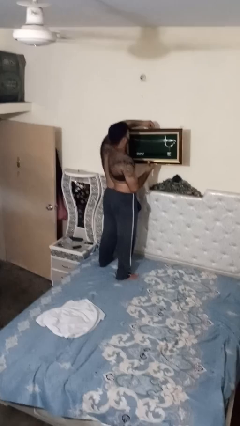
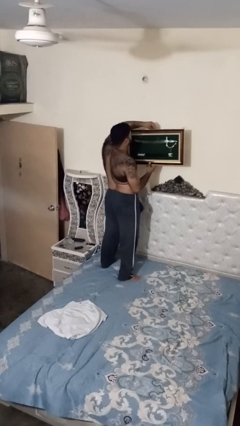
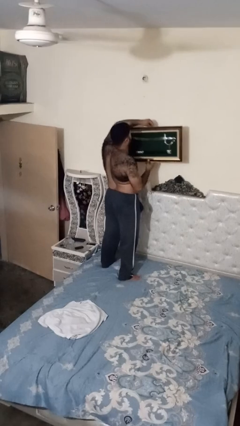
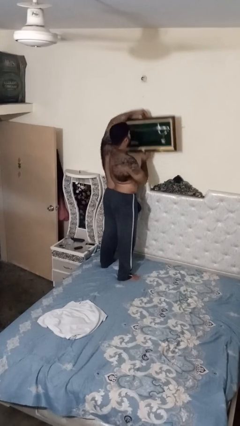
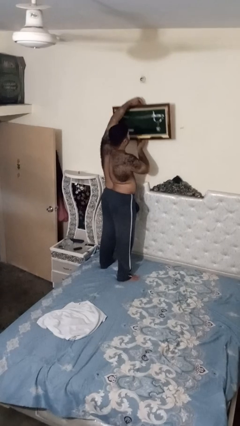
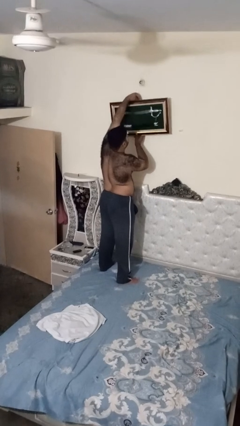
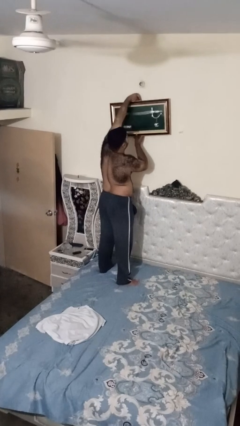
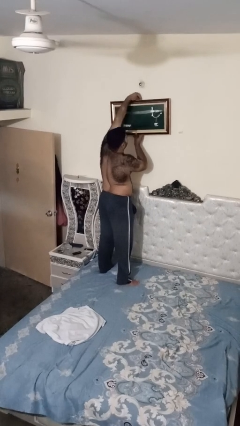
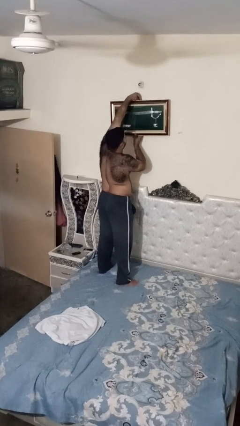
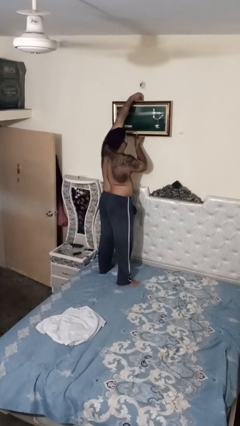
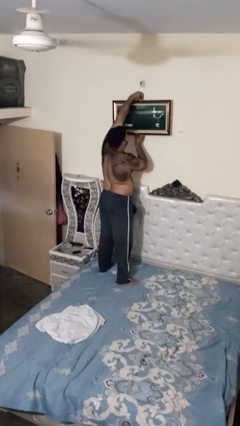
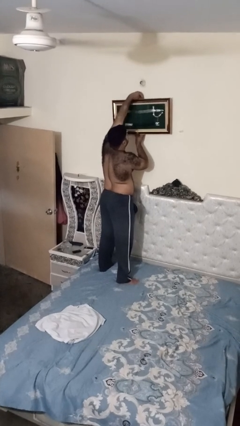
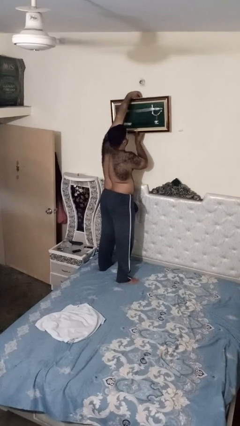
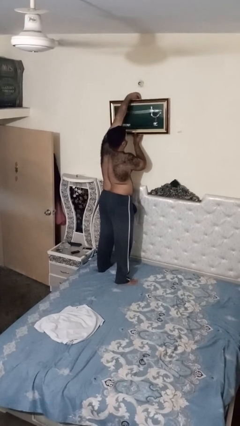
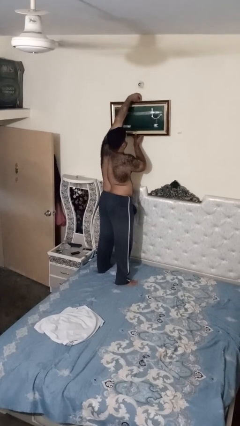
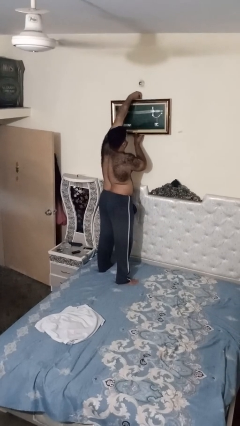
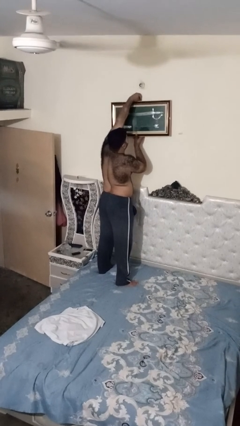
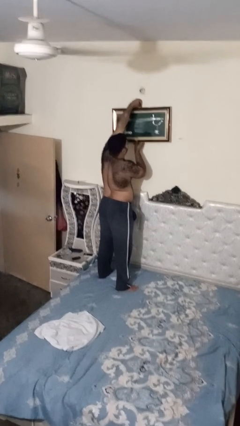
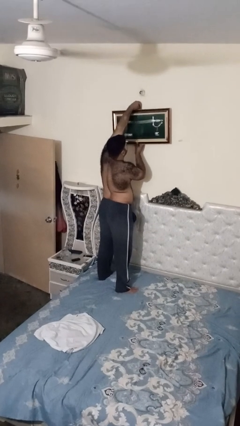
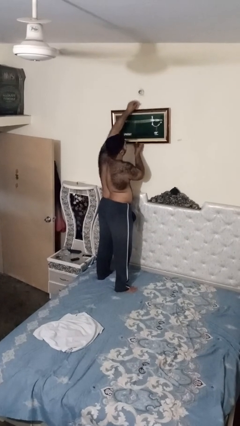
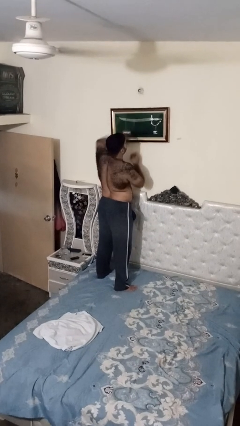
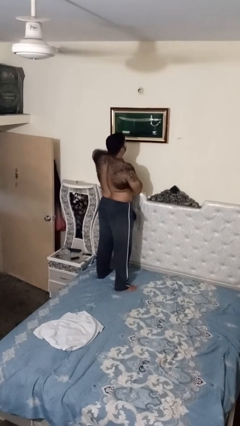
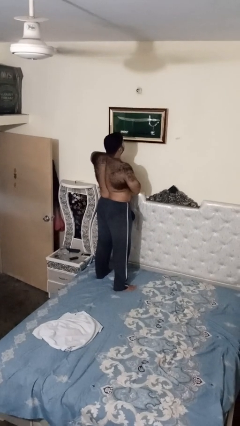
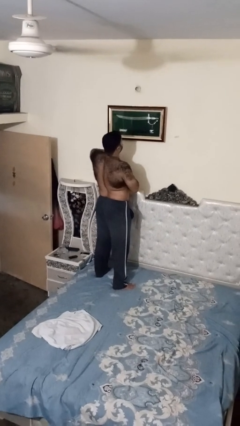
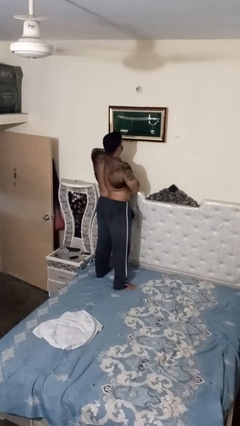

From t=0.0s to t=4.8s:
person puts up picture frame

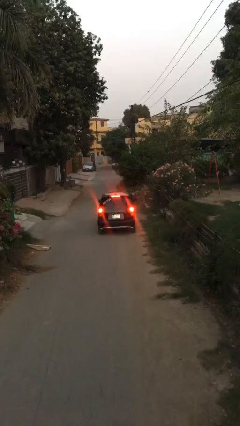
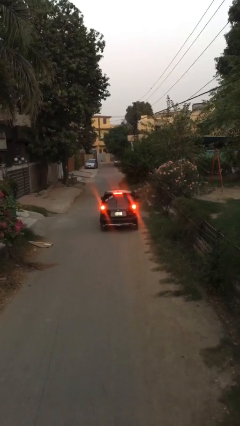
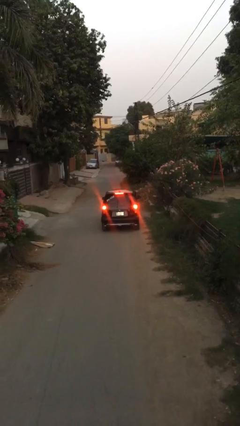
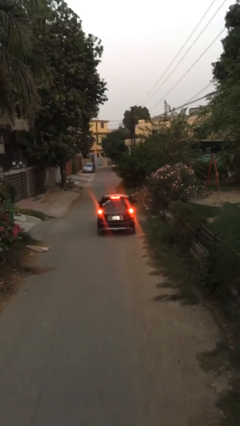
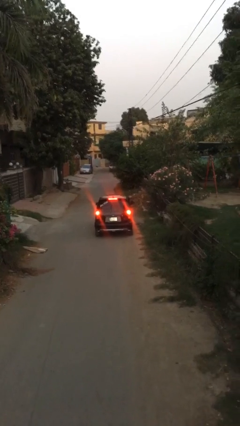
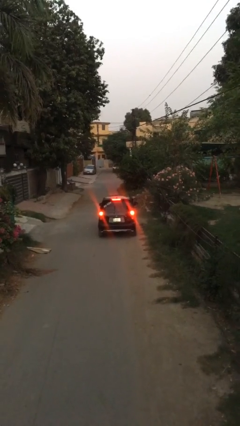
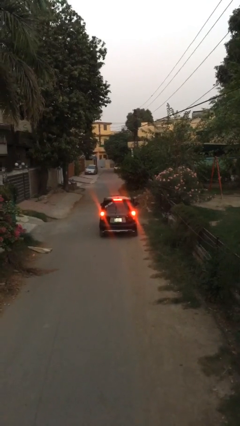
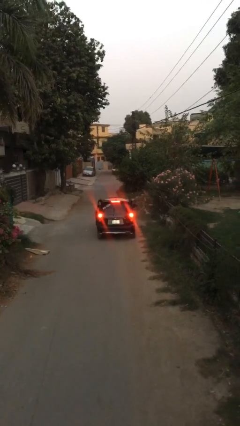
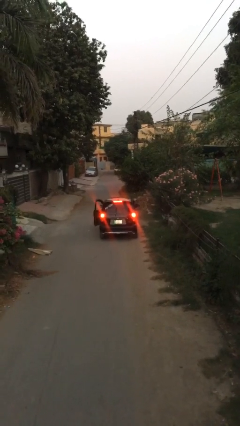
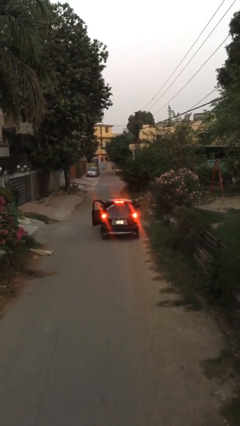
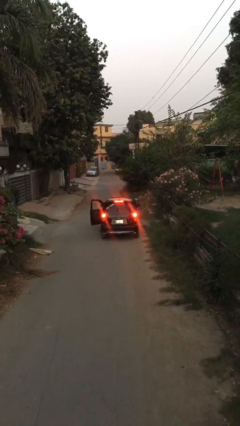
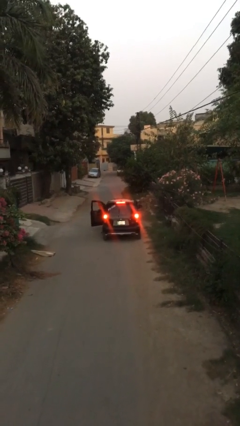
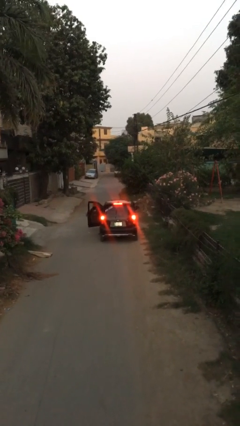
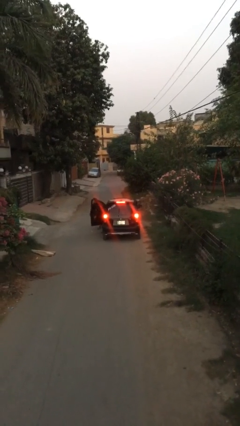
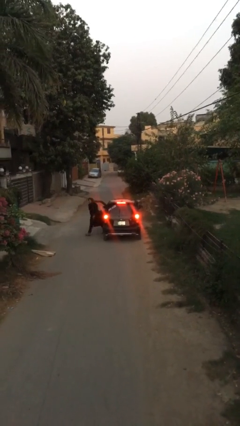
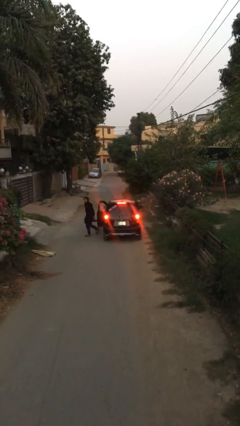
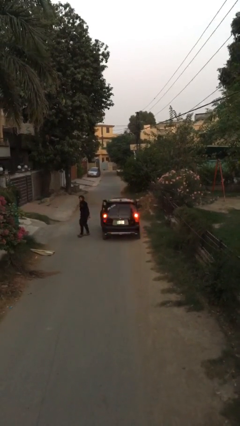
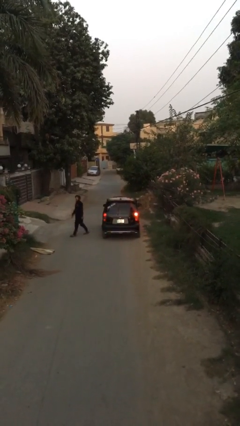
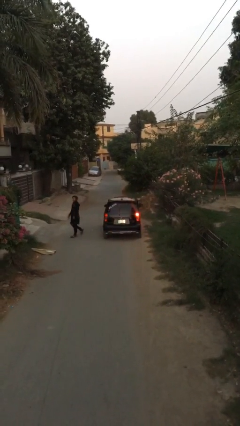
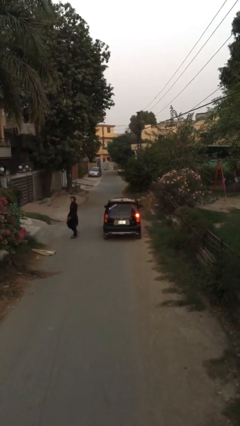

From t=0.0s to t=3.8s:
car drops off person

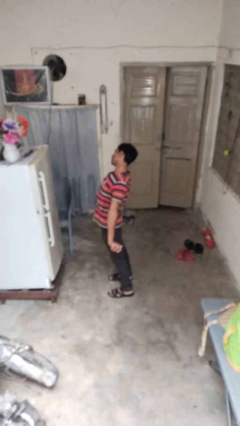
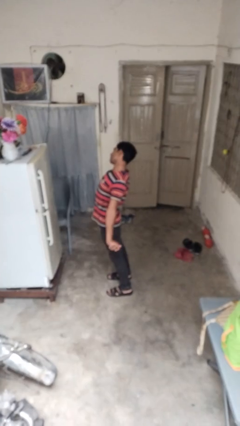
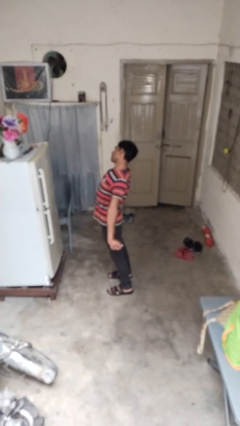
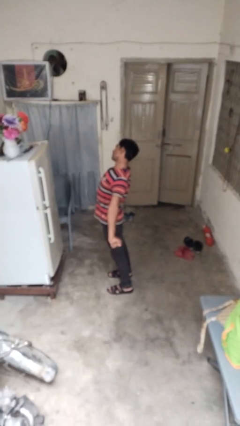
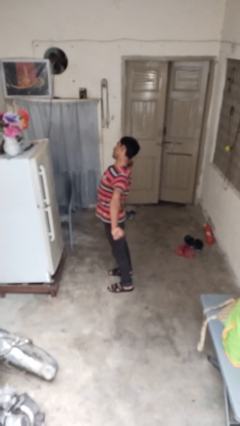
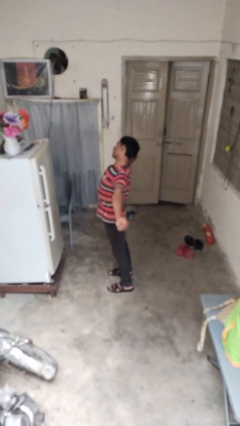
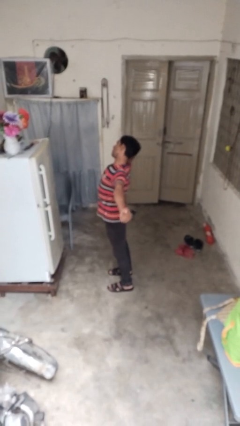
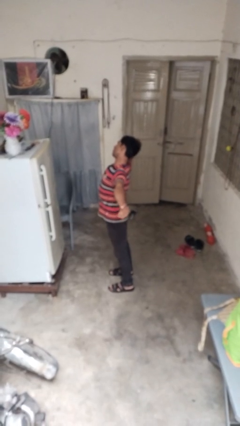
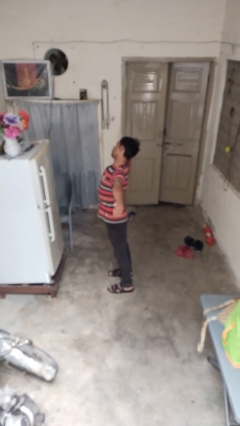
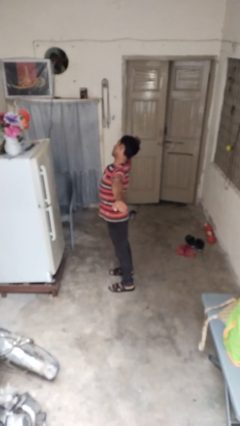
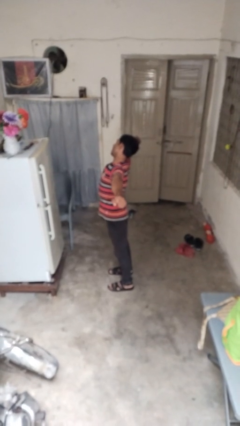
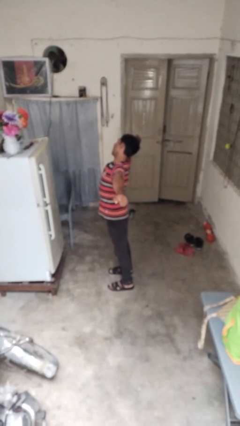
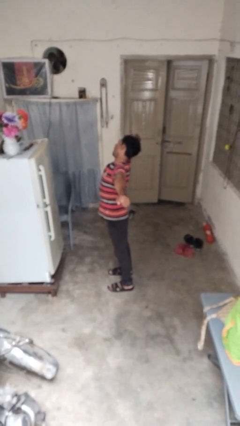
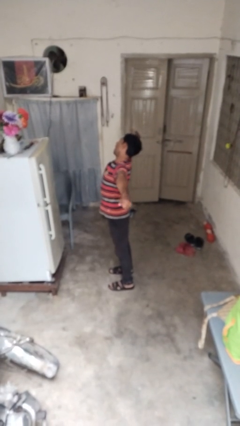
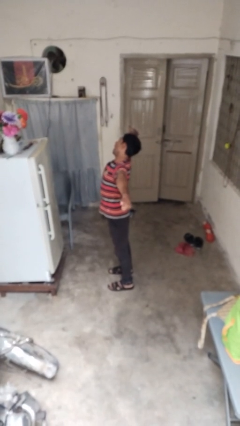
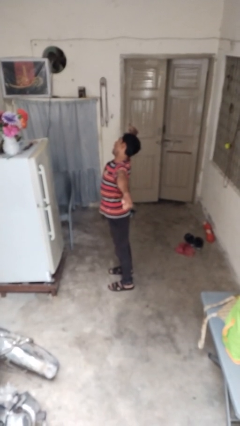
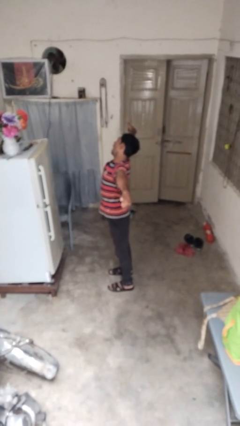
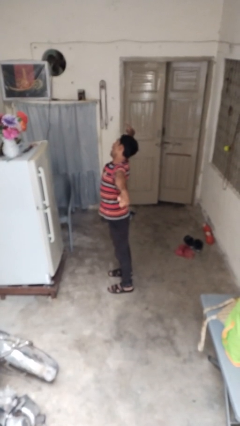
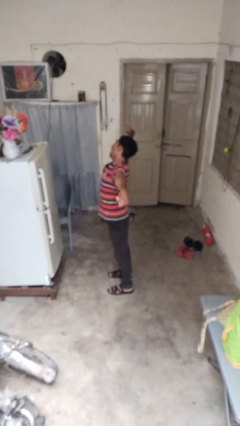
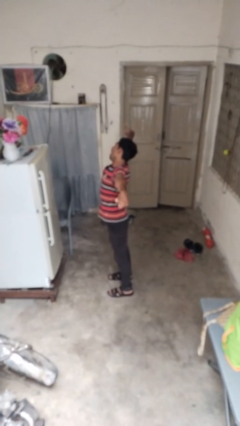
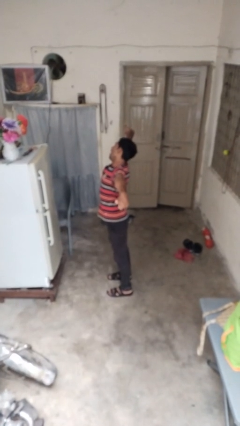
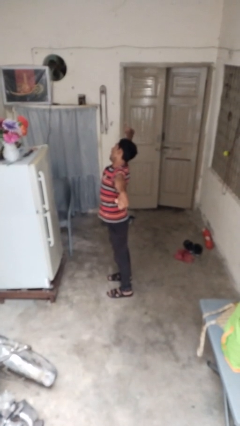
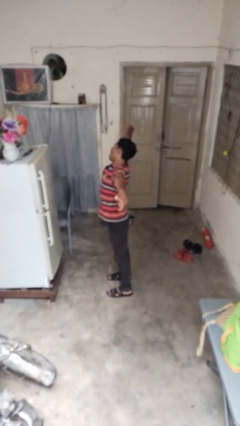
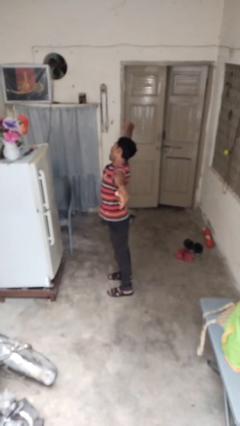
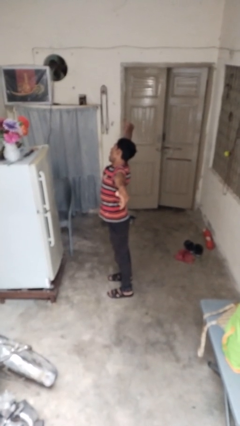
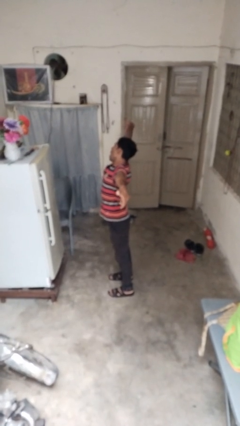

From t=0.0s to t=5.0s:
person stretches arms to side

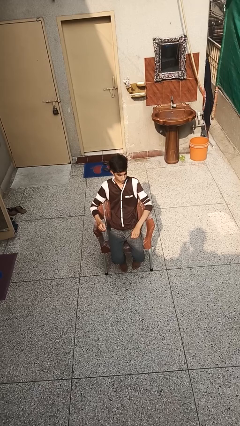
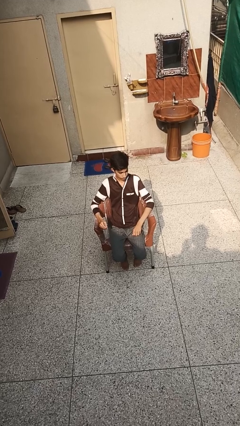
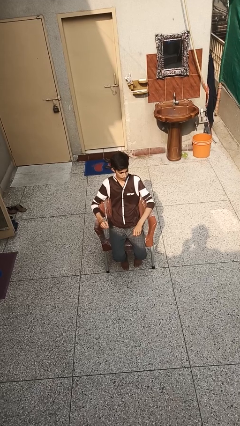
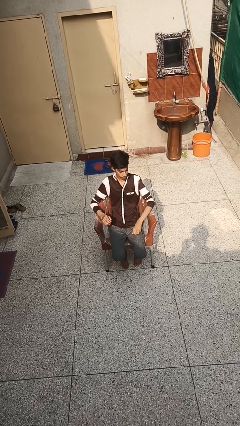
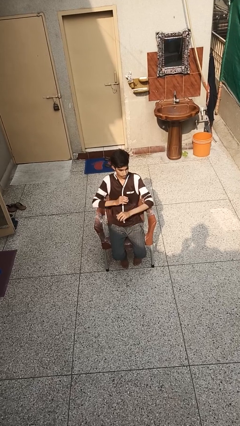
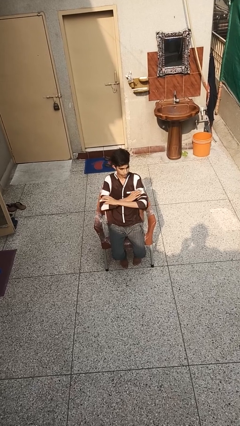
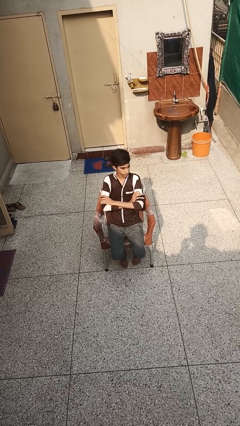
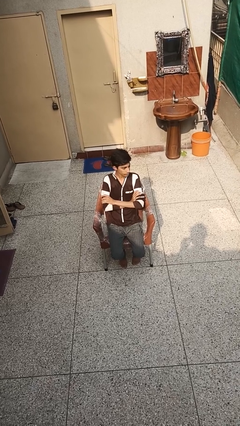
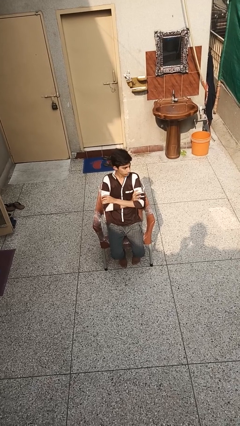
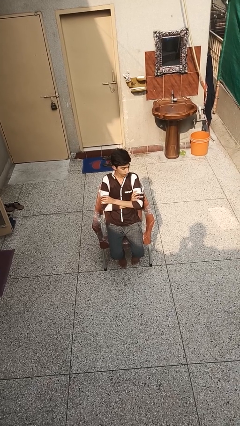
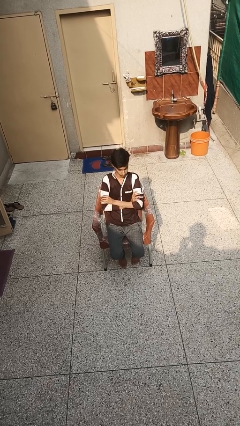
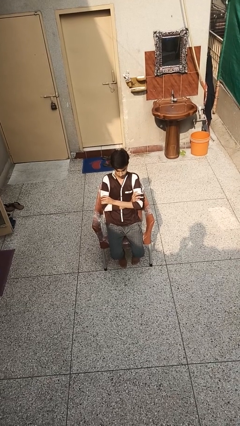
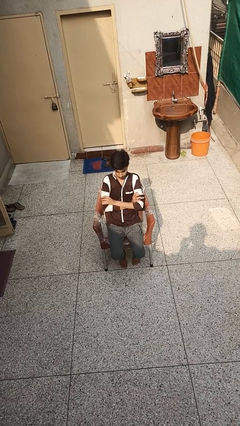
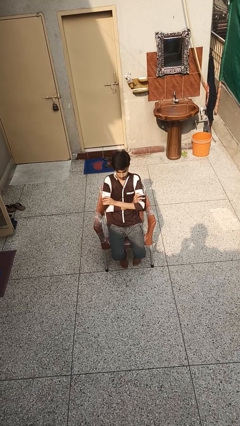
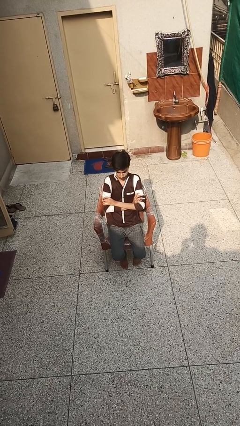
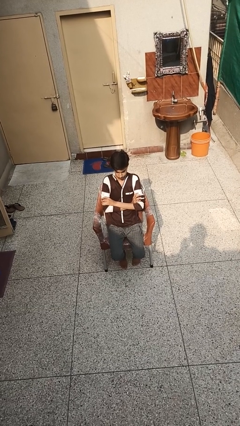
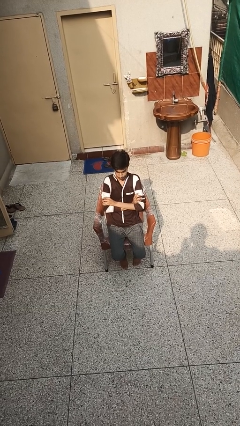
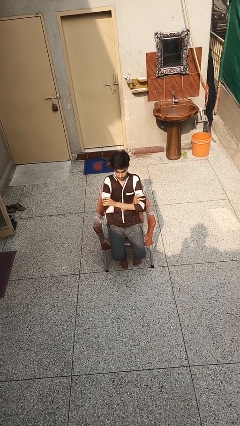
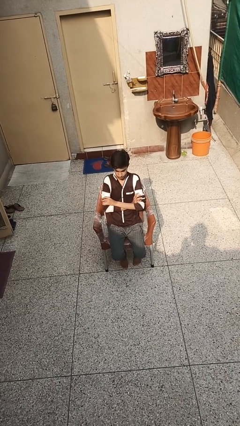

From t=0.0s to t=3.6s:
person crosses arms
